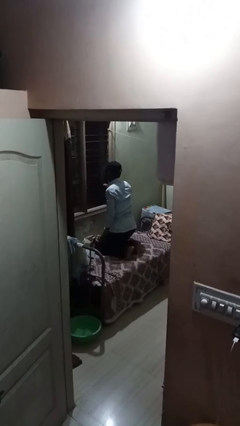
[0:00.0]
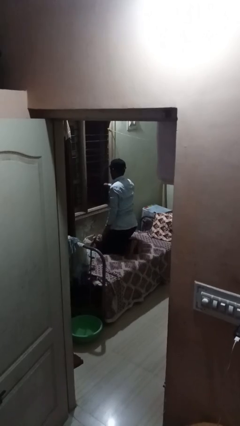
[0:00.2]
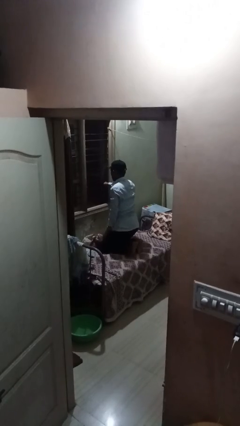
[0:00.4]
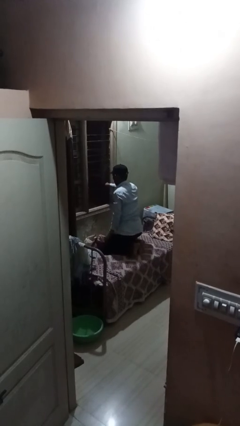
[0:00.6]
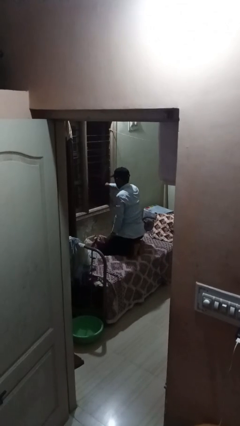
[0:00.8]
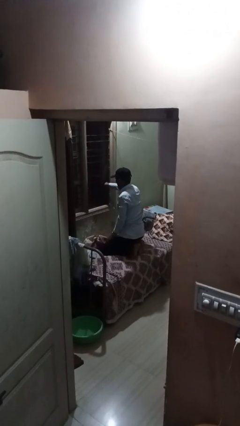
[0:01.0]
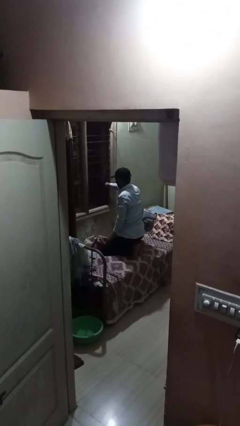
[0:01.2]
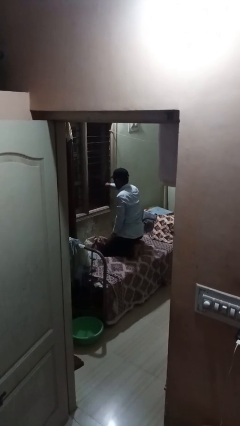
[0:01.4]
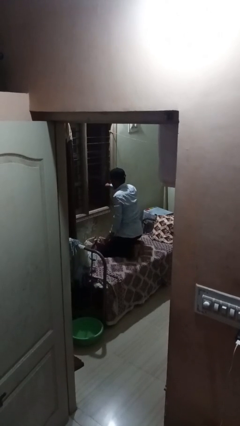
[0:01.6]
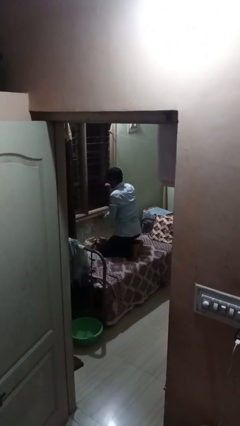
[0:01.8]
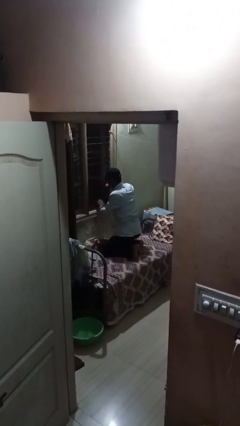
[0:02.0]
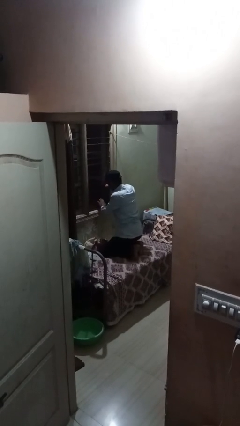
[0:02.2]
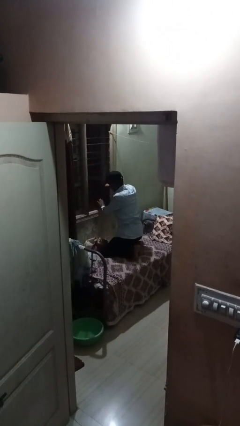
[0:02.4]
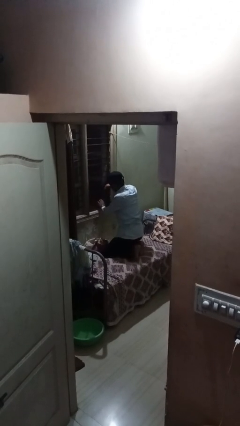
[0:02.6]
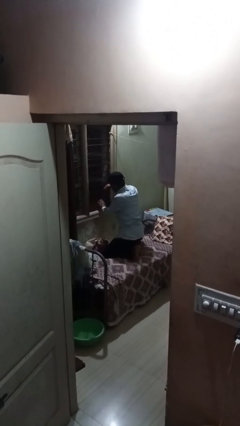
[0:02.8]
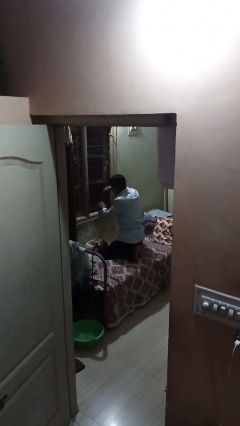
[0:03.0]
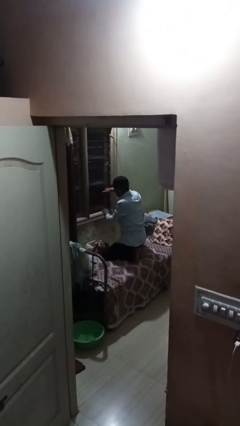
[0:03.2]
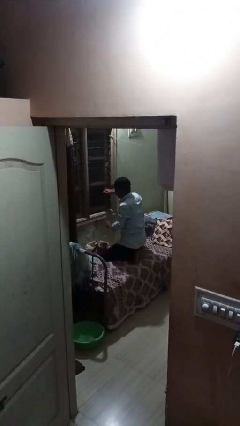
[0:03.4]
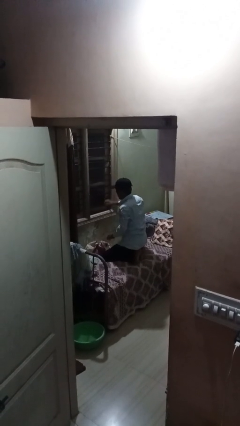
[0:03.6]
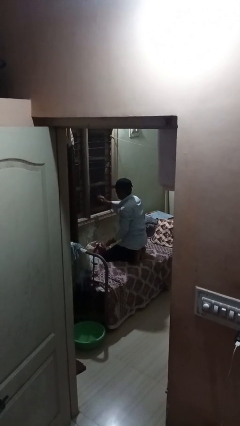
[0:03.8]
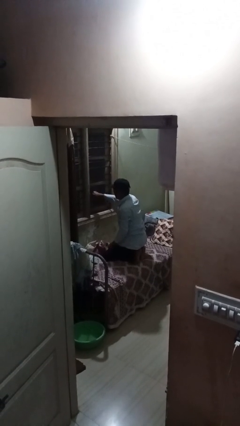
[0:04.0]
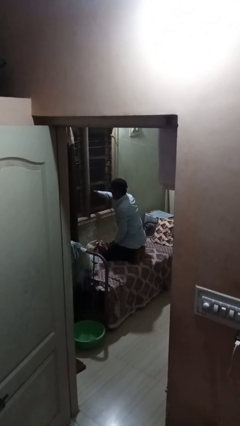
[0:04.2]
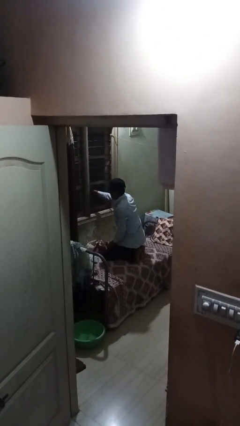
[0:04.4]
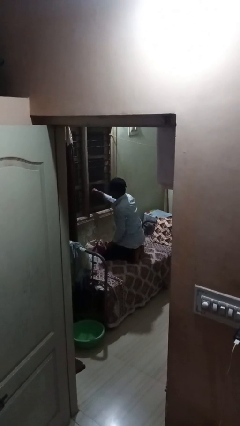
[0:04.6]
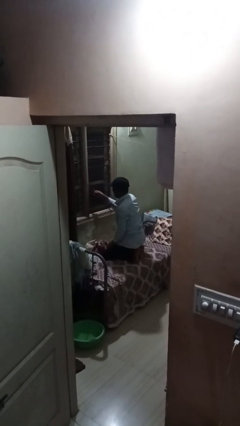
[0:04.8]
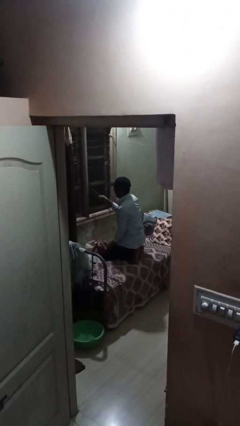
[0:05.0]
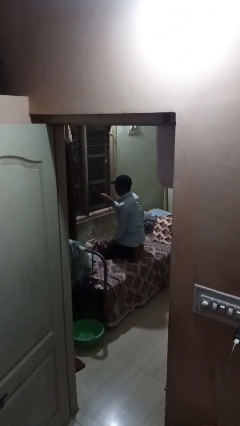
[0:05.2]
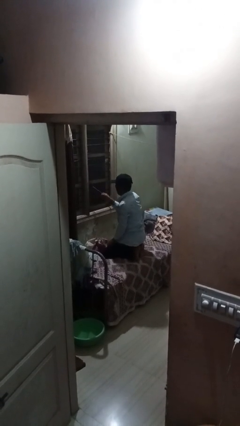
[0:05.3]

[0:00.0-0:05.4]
person closes home window

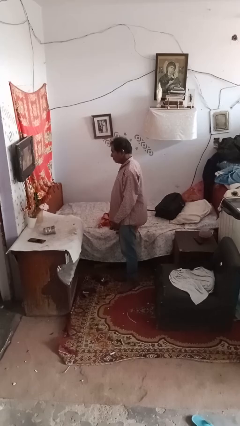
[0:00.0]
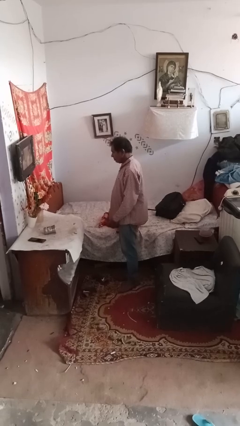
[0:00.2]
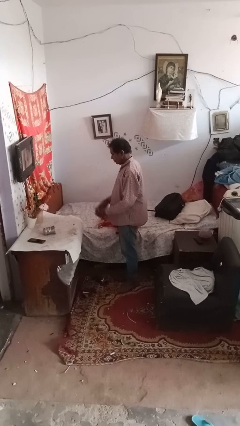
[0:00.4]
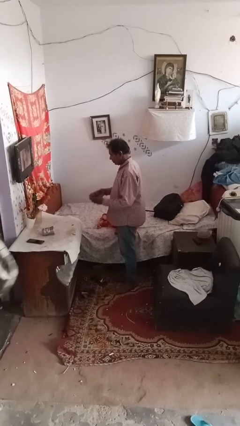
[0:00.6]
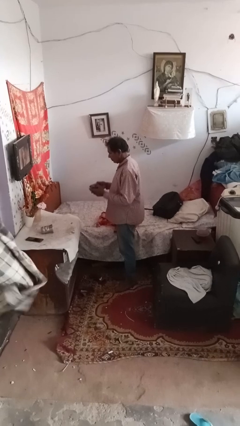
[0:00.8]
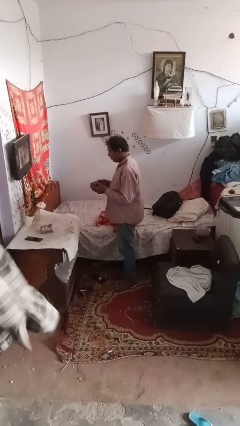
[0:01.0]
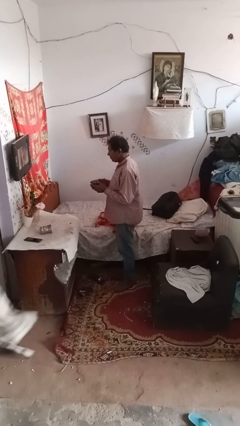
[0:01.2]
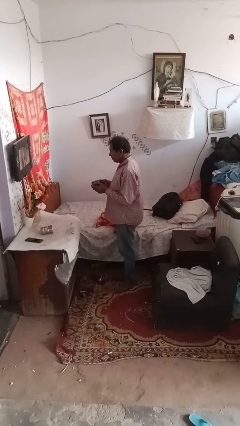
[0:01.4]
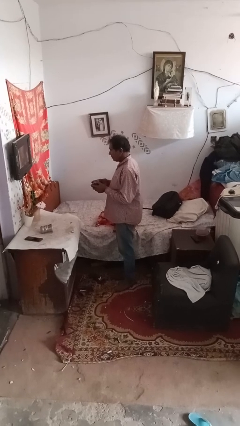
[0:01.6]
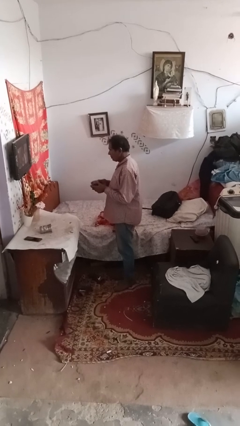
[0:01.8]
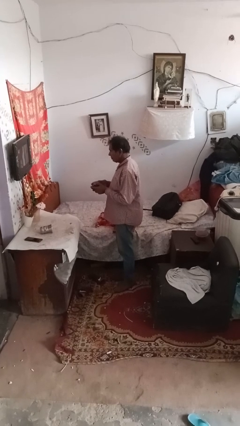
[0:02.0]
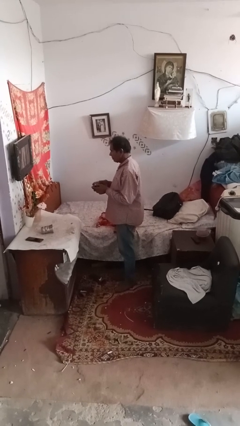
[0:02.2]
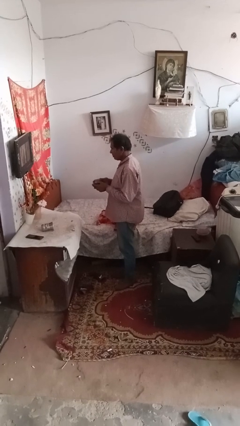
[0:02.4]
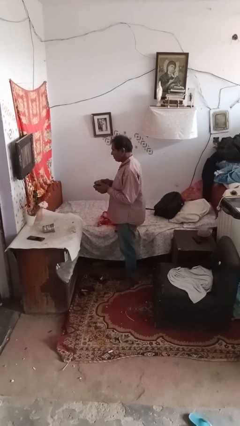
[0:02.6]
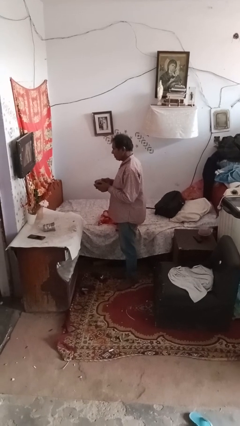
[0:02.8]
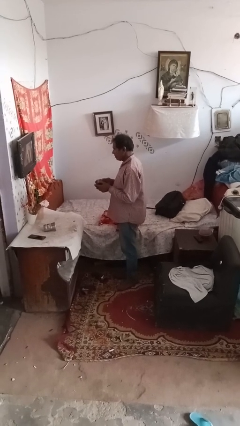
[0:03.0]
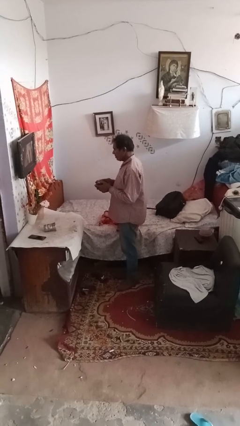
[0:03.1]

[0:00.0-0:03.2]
person interacts with handheld game

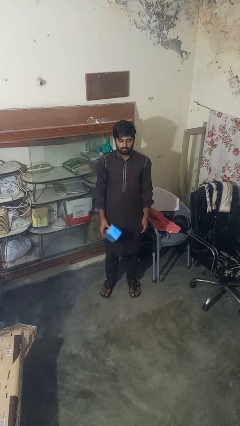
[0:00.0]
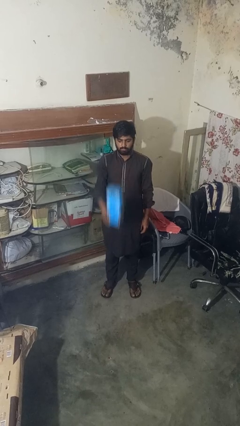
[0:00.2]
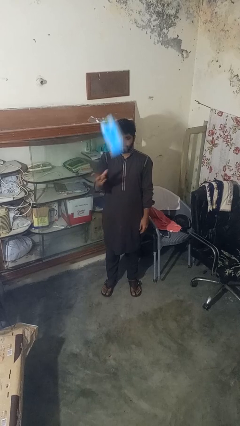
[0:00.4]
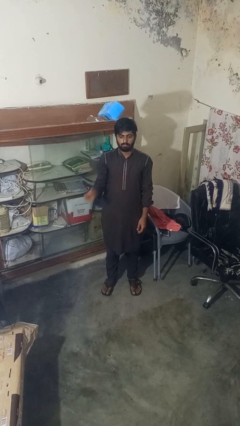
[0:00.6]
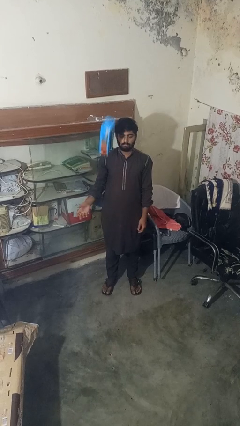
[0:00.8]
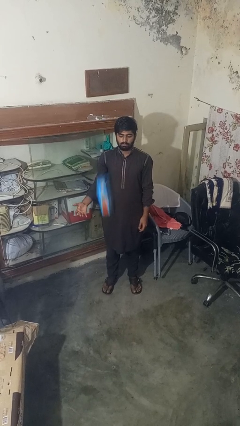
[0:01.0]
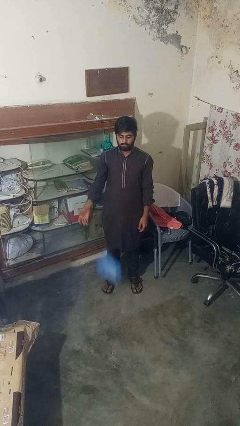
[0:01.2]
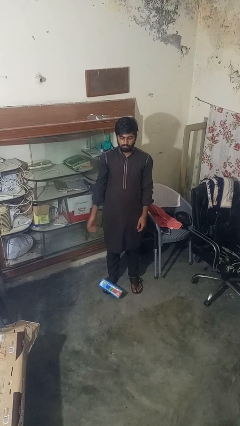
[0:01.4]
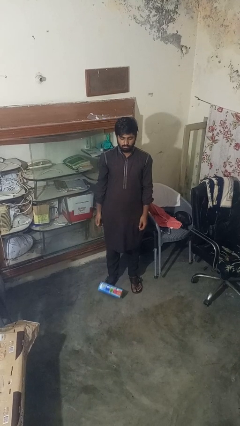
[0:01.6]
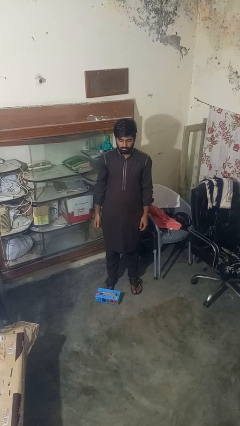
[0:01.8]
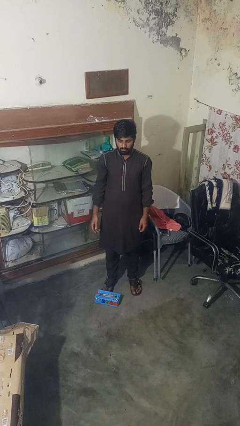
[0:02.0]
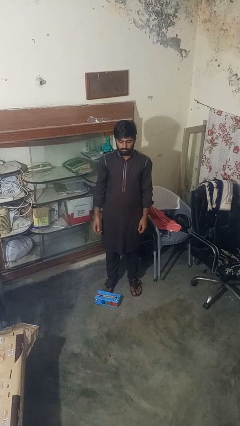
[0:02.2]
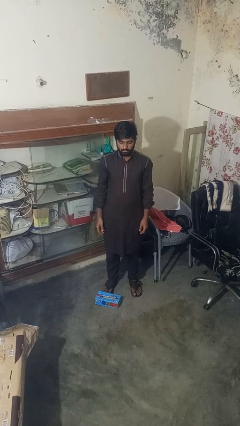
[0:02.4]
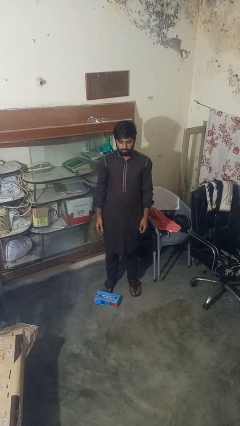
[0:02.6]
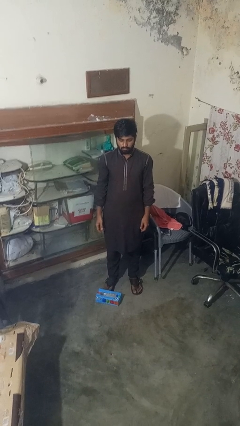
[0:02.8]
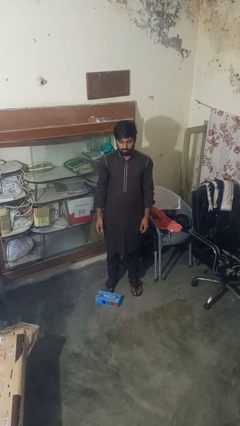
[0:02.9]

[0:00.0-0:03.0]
person throws object into air

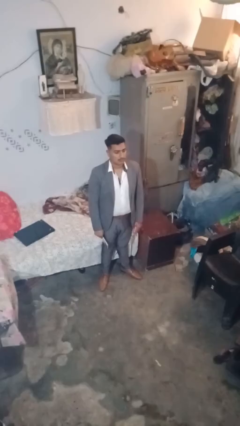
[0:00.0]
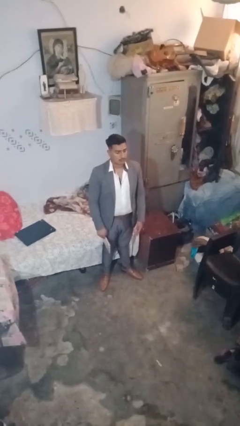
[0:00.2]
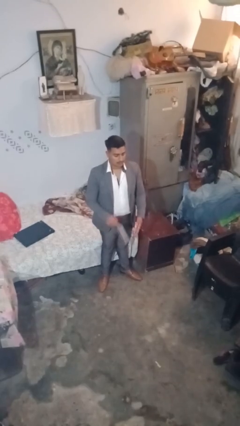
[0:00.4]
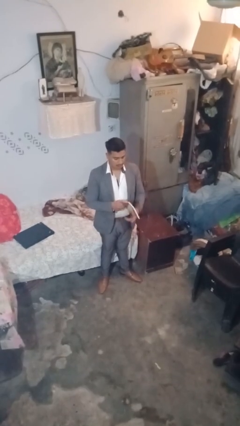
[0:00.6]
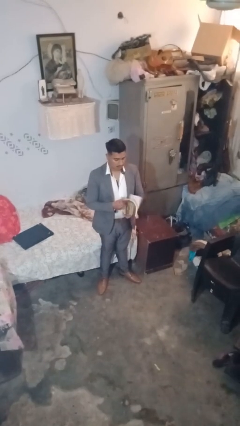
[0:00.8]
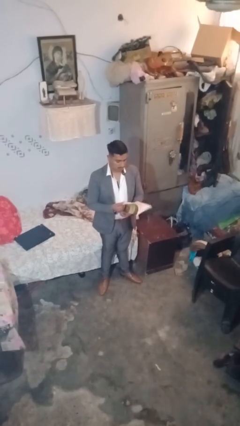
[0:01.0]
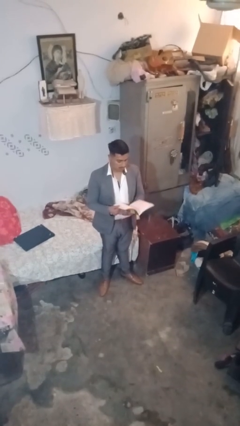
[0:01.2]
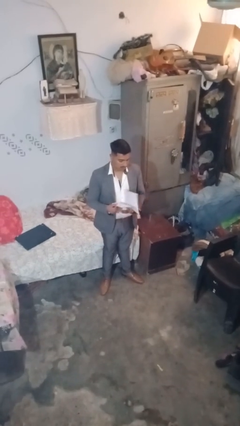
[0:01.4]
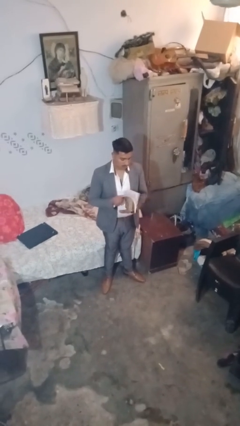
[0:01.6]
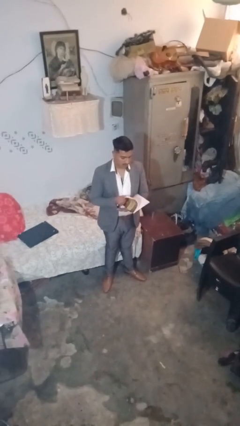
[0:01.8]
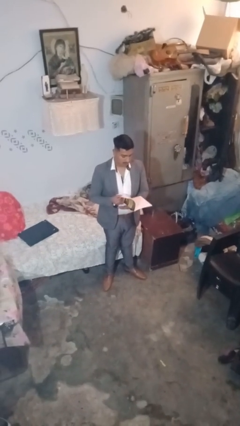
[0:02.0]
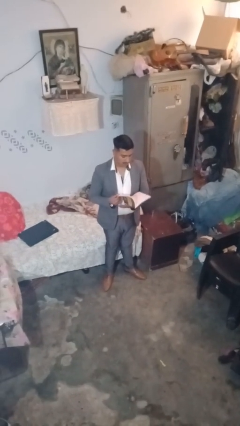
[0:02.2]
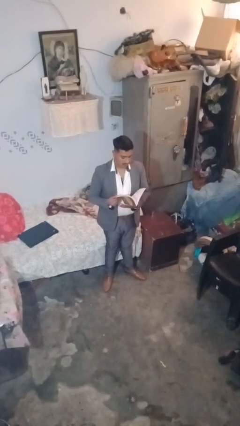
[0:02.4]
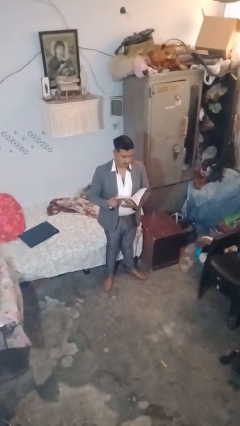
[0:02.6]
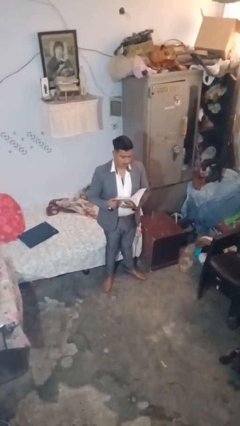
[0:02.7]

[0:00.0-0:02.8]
person reads document

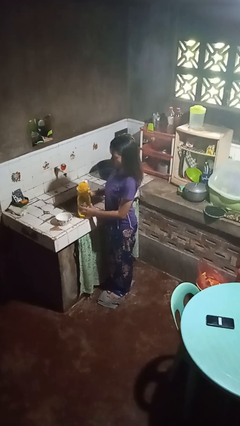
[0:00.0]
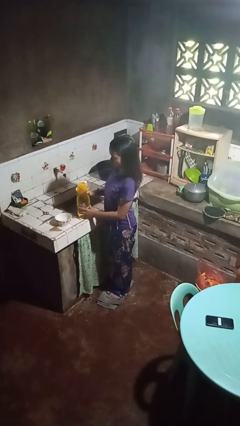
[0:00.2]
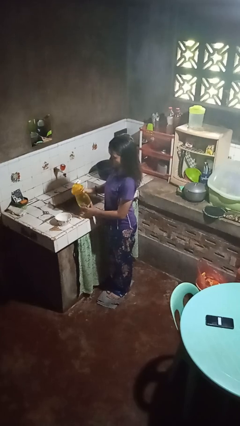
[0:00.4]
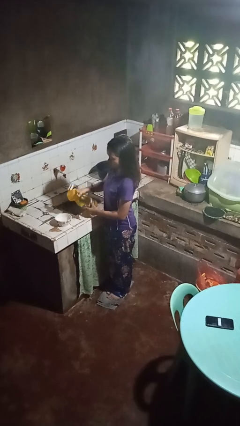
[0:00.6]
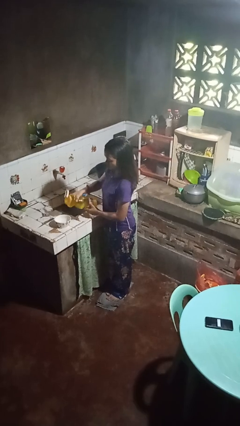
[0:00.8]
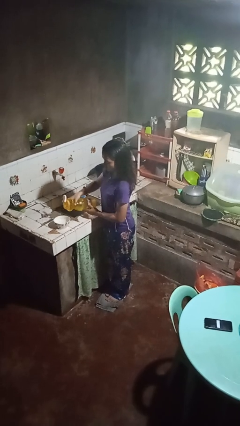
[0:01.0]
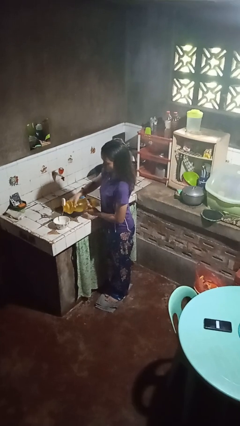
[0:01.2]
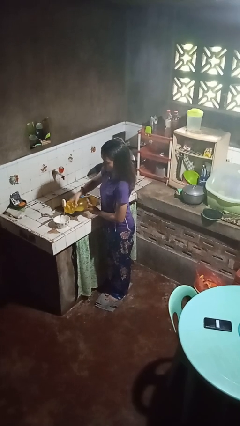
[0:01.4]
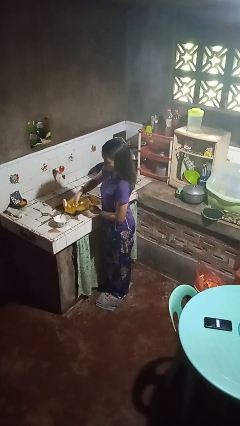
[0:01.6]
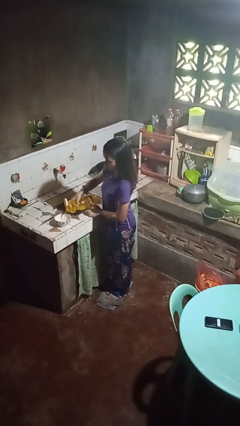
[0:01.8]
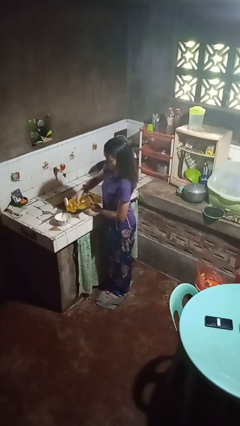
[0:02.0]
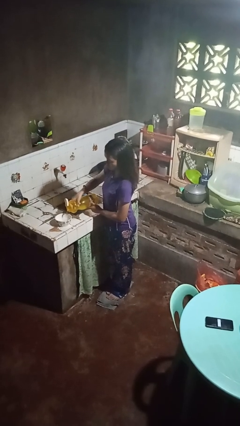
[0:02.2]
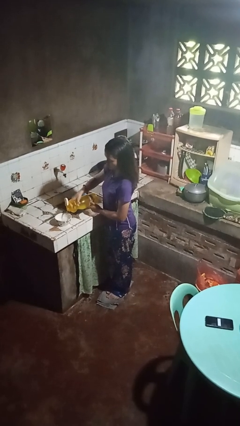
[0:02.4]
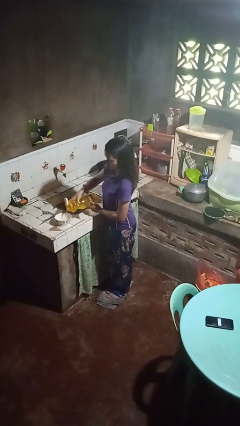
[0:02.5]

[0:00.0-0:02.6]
person pours into bowl

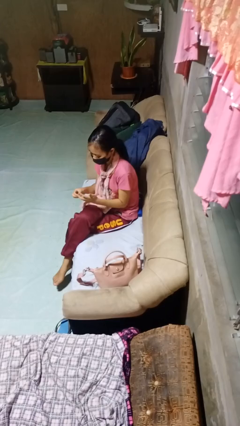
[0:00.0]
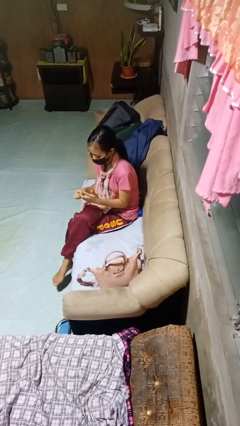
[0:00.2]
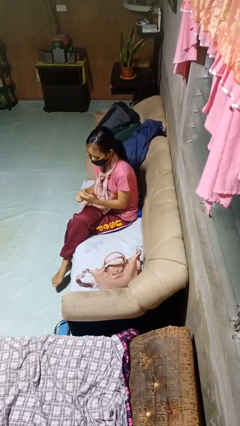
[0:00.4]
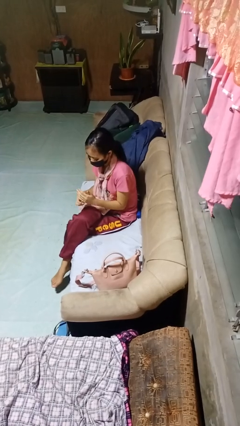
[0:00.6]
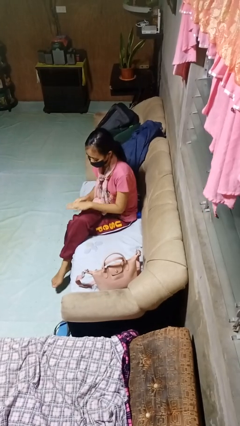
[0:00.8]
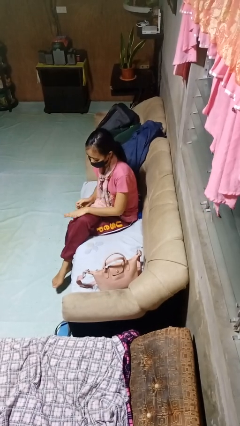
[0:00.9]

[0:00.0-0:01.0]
person puts on ring
